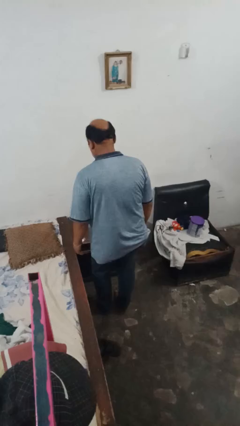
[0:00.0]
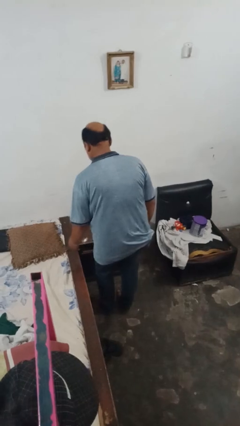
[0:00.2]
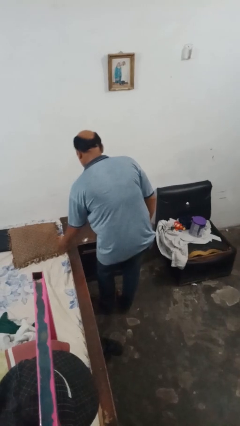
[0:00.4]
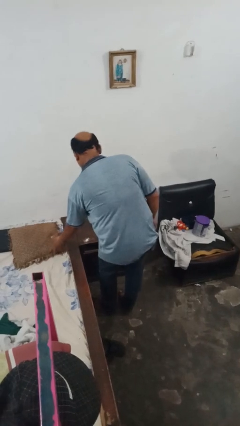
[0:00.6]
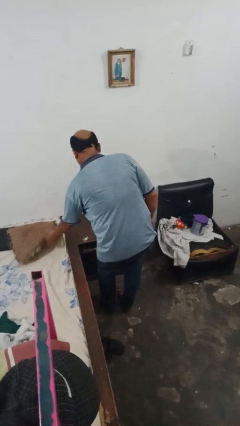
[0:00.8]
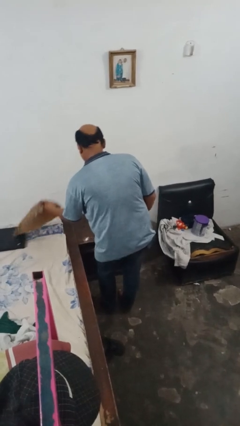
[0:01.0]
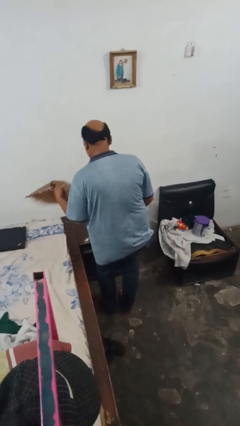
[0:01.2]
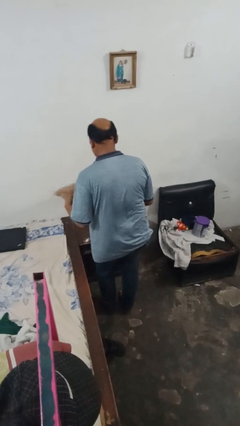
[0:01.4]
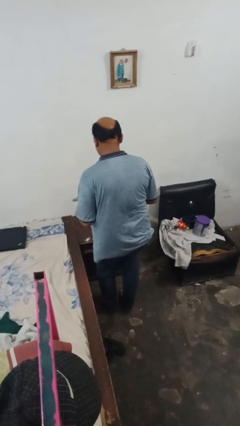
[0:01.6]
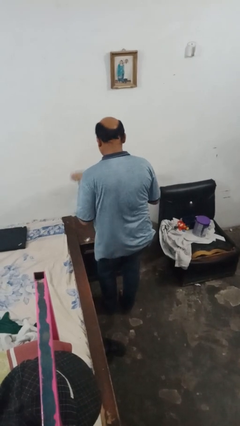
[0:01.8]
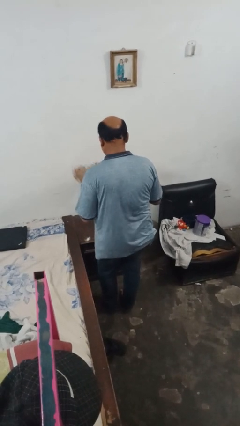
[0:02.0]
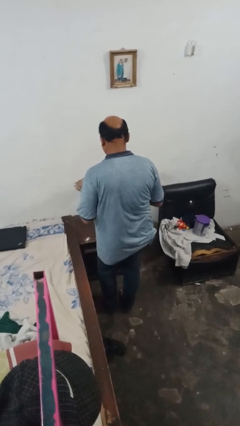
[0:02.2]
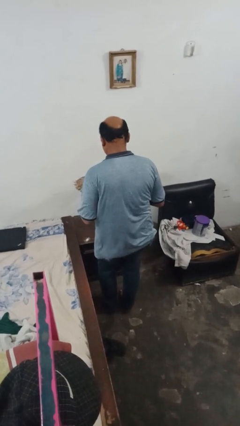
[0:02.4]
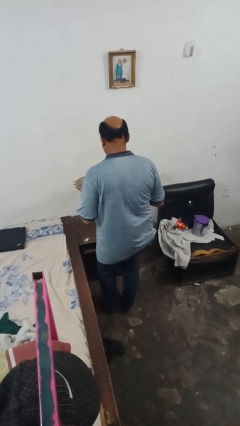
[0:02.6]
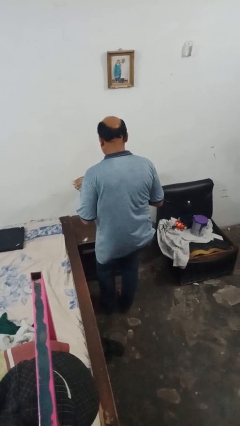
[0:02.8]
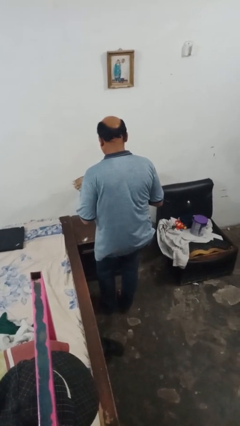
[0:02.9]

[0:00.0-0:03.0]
person picks up object from bed

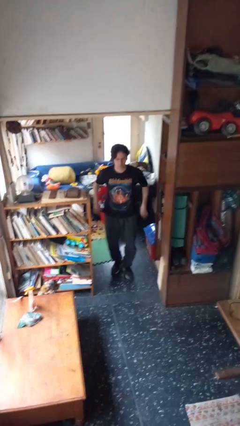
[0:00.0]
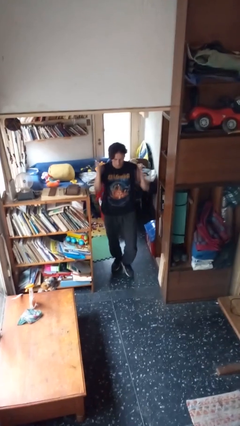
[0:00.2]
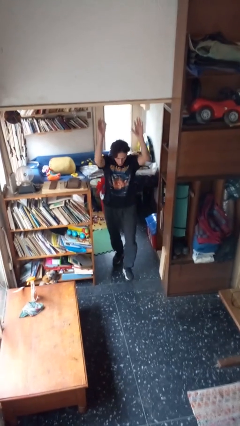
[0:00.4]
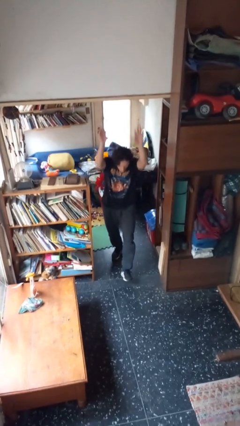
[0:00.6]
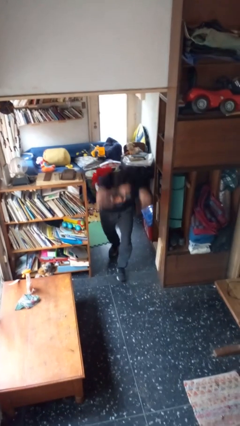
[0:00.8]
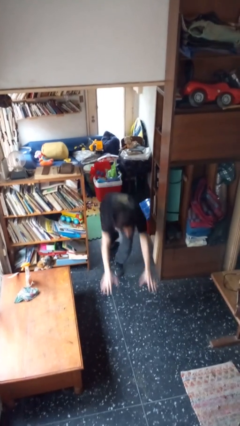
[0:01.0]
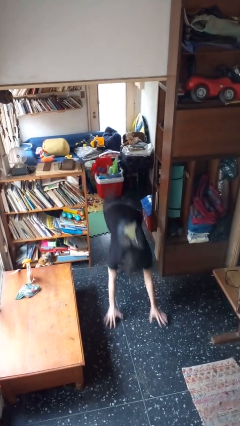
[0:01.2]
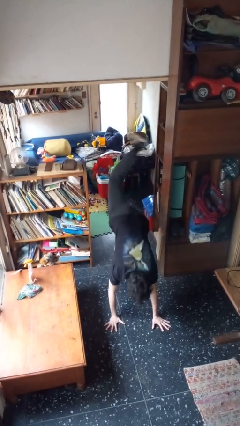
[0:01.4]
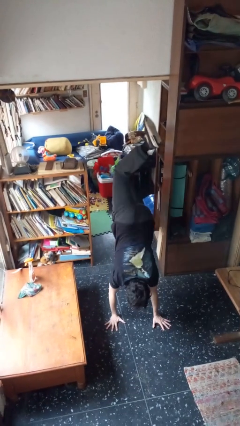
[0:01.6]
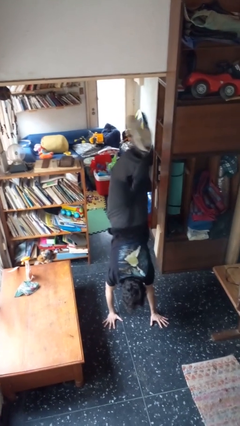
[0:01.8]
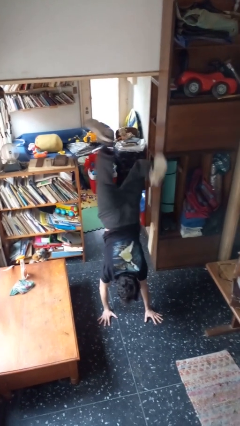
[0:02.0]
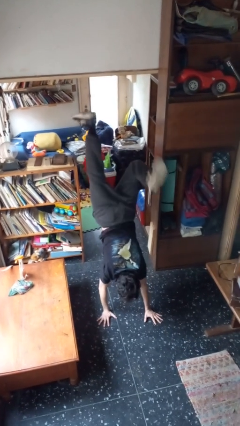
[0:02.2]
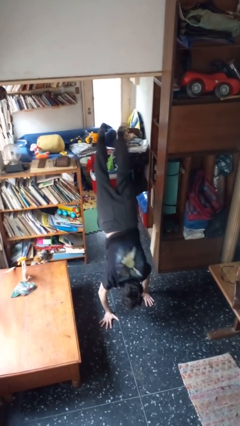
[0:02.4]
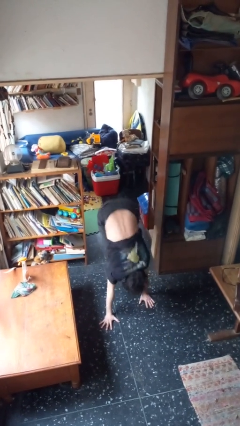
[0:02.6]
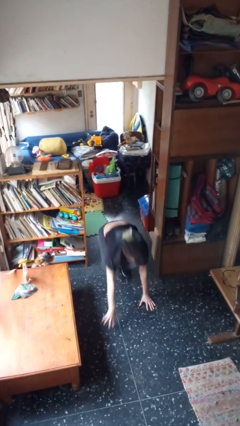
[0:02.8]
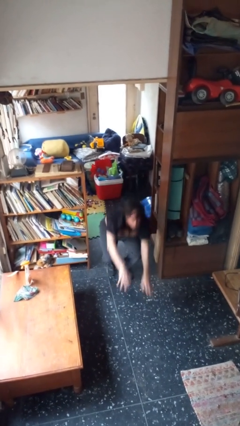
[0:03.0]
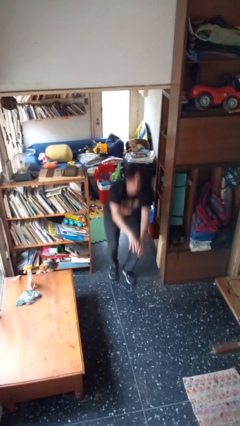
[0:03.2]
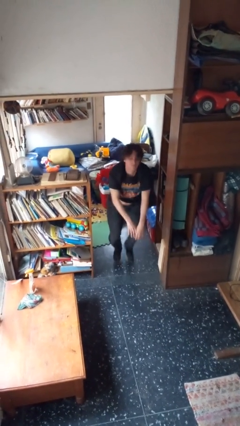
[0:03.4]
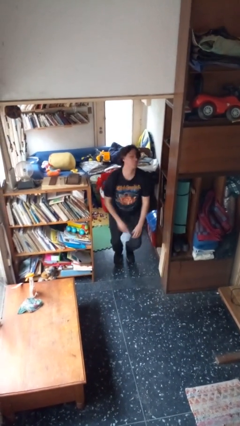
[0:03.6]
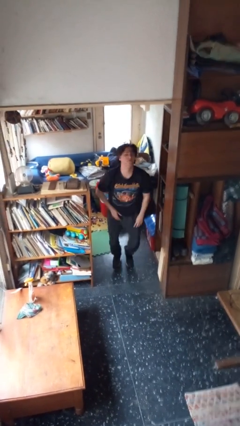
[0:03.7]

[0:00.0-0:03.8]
person handstand

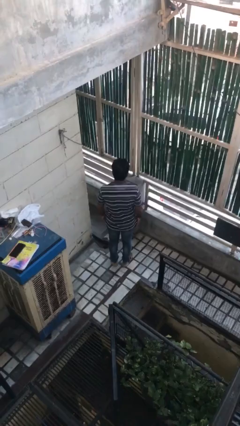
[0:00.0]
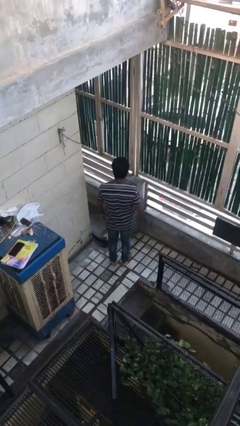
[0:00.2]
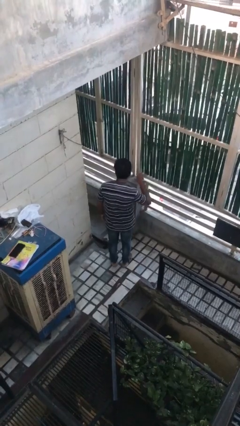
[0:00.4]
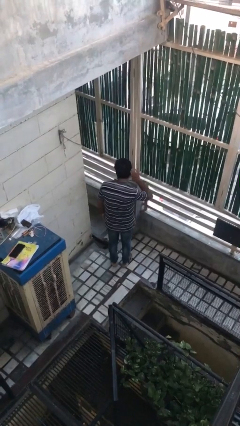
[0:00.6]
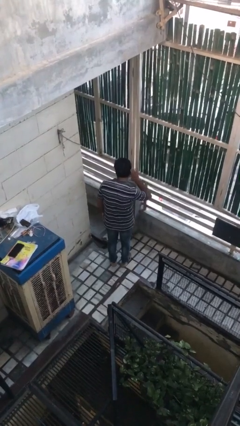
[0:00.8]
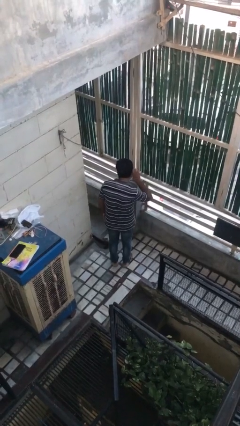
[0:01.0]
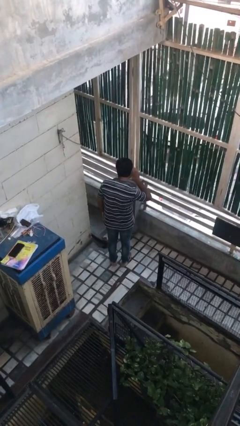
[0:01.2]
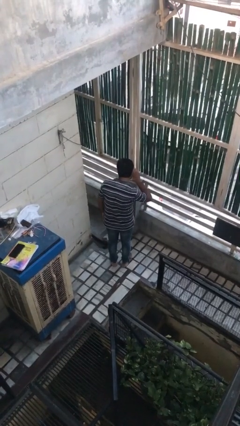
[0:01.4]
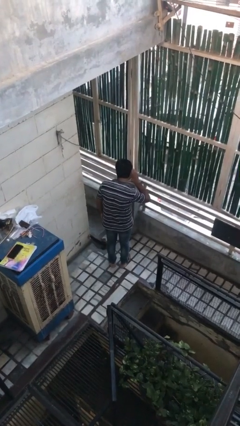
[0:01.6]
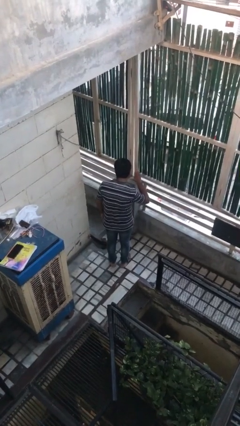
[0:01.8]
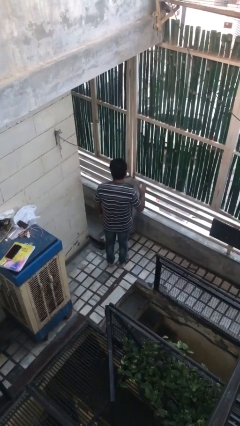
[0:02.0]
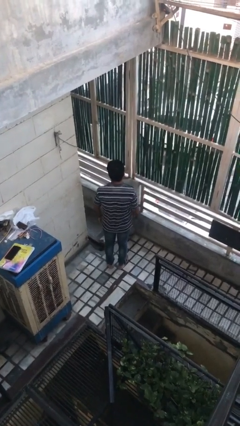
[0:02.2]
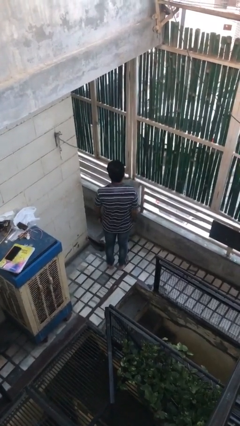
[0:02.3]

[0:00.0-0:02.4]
person gestures listen closely

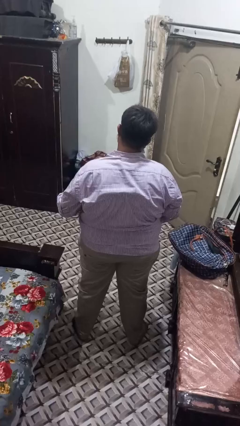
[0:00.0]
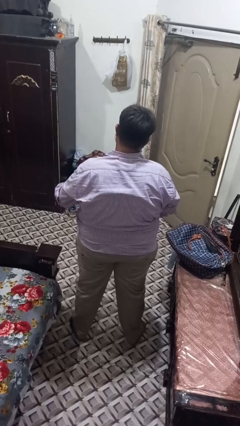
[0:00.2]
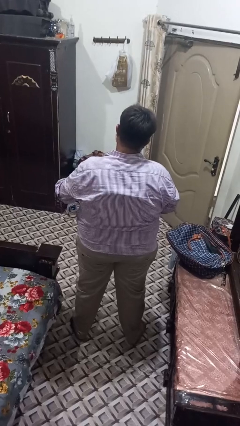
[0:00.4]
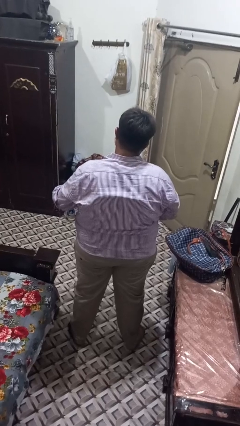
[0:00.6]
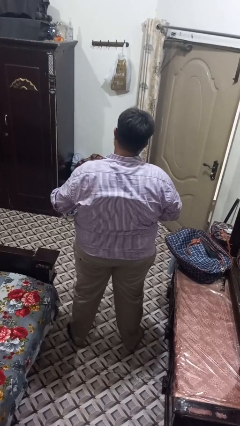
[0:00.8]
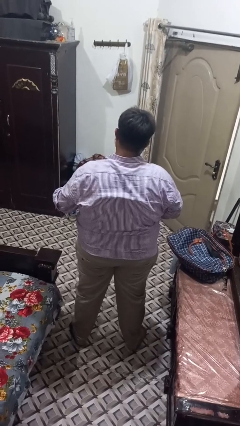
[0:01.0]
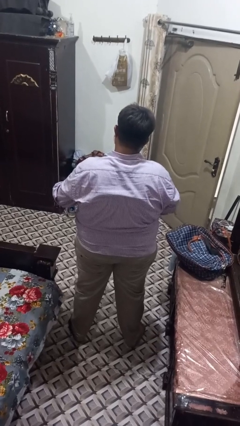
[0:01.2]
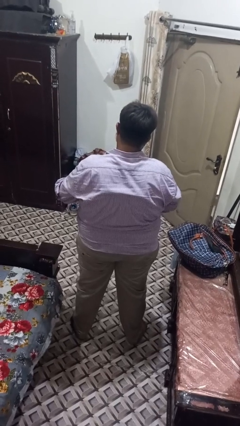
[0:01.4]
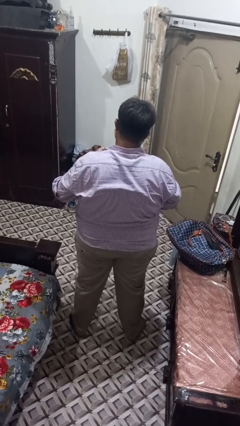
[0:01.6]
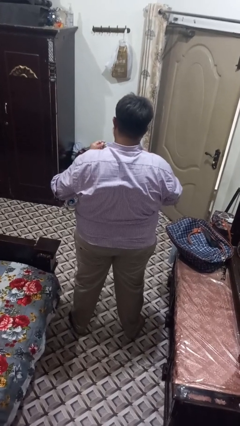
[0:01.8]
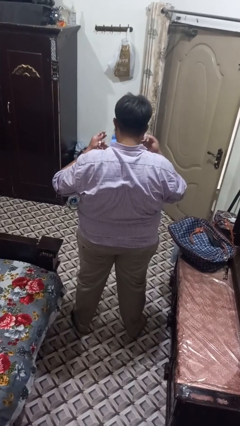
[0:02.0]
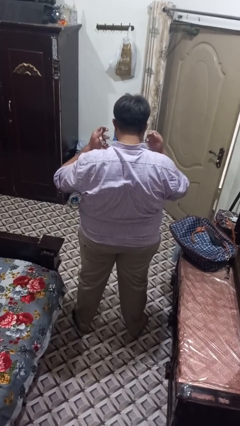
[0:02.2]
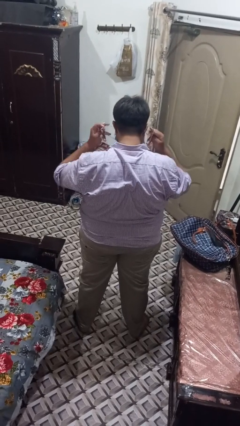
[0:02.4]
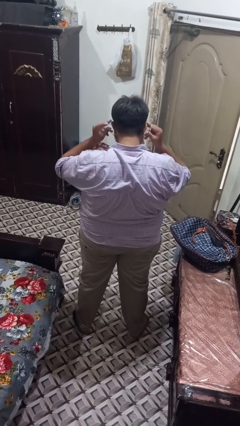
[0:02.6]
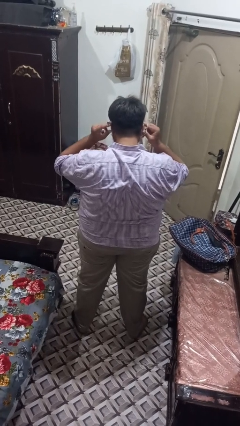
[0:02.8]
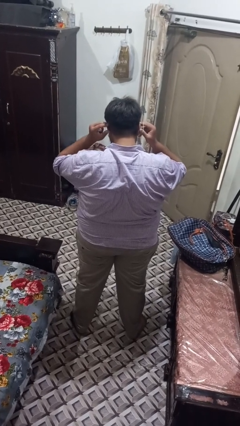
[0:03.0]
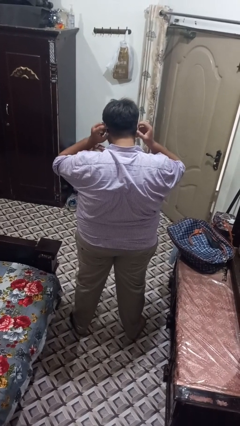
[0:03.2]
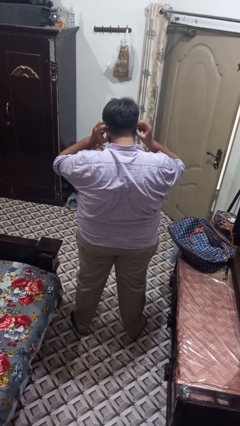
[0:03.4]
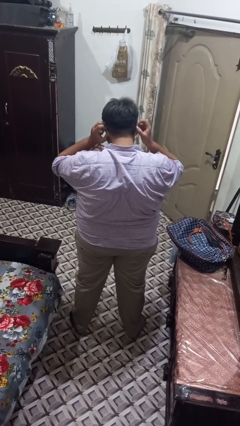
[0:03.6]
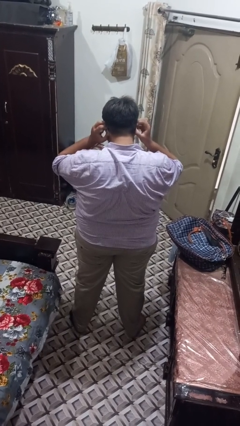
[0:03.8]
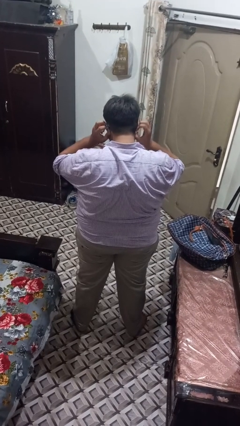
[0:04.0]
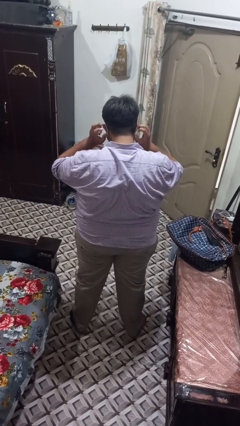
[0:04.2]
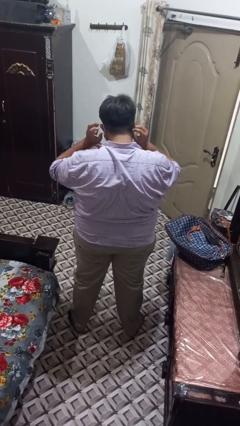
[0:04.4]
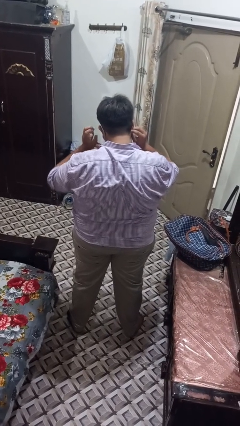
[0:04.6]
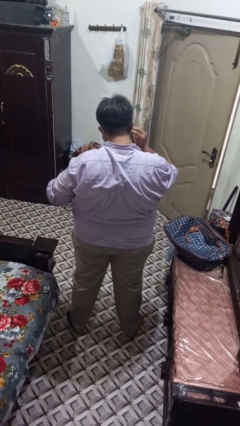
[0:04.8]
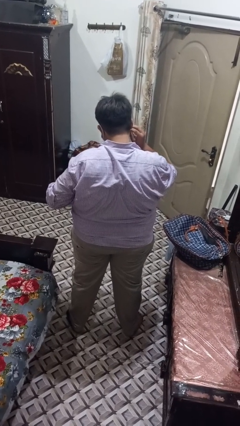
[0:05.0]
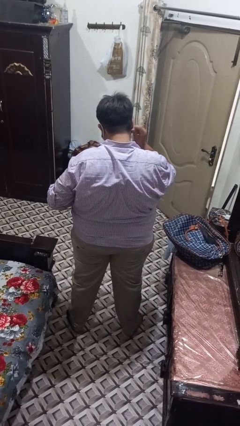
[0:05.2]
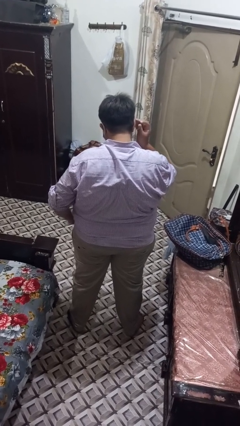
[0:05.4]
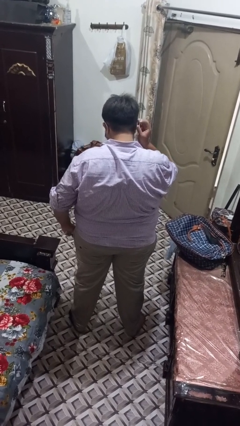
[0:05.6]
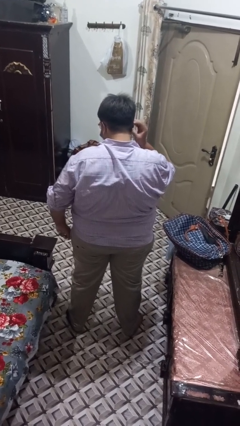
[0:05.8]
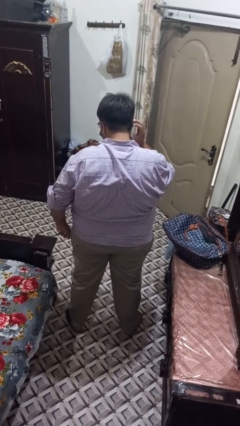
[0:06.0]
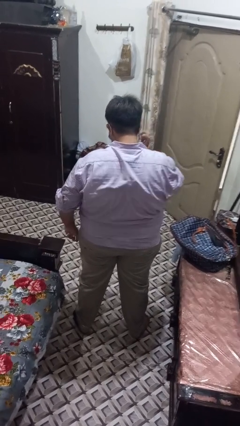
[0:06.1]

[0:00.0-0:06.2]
person puts on facemask

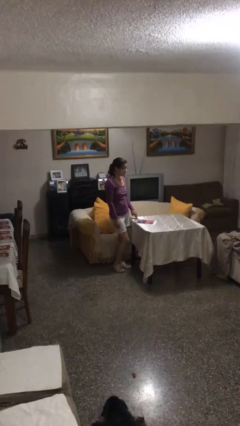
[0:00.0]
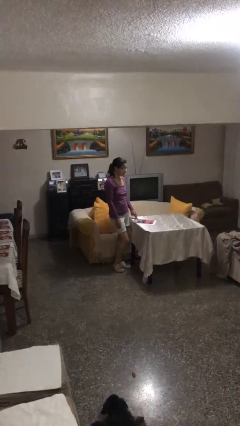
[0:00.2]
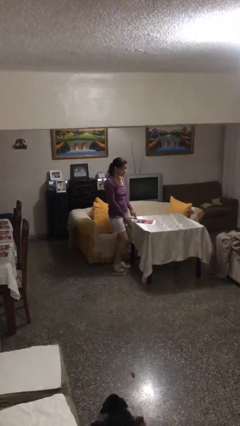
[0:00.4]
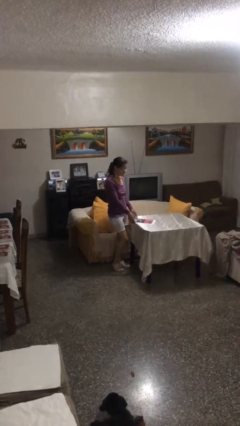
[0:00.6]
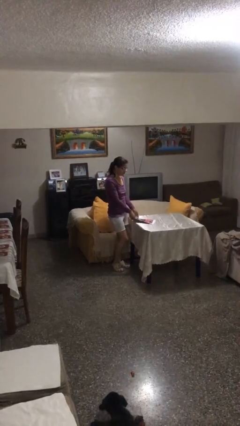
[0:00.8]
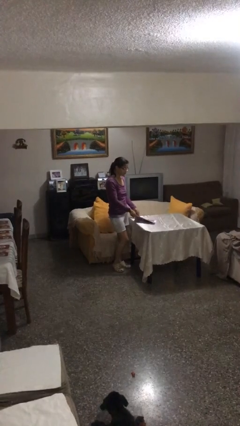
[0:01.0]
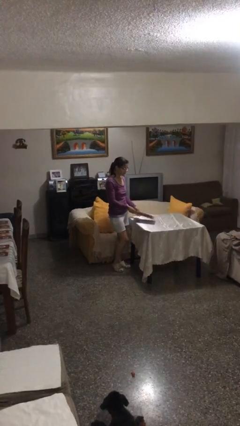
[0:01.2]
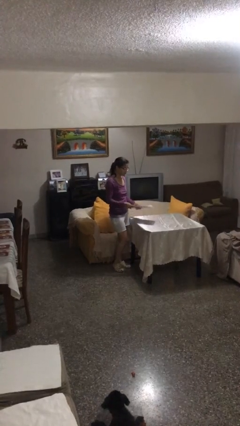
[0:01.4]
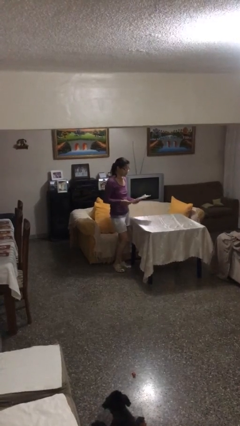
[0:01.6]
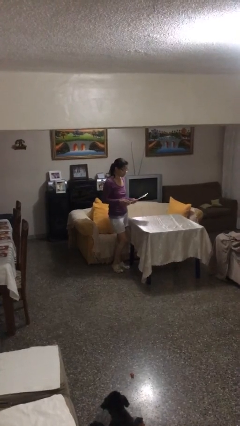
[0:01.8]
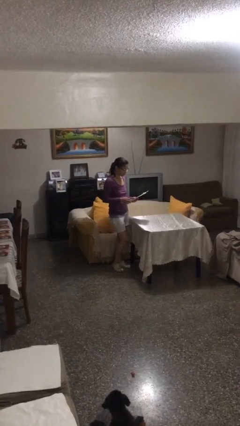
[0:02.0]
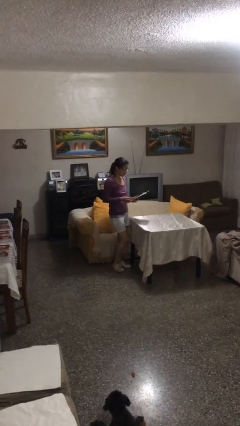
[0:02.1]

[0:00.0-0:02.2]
person picks up object from table
